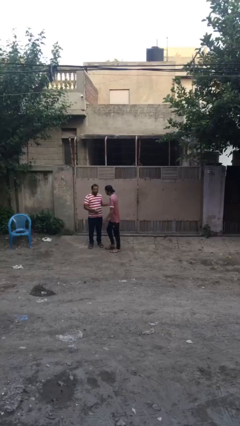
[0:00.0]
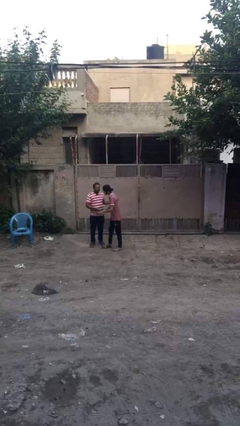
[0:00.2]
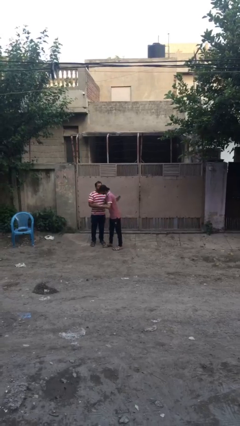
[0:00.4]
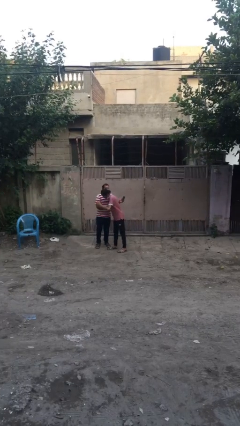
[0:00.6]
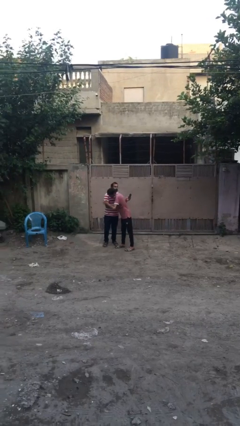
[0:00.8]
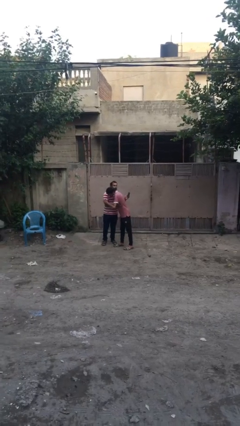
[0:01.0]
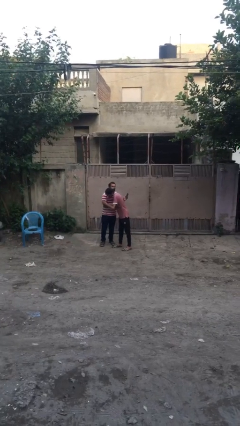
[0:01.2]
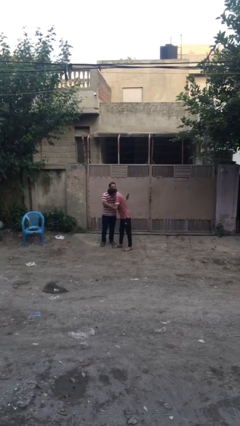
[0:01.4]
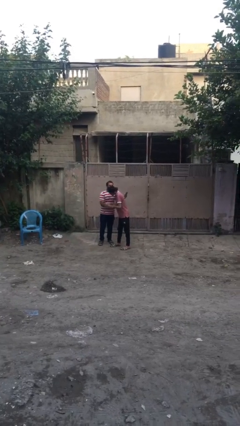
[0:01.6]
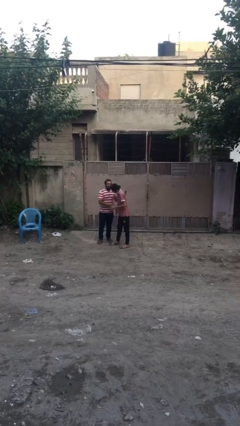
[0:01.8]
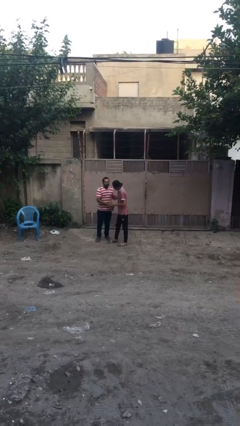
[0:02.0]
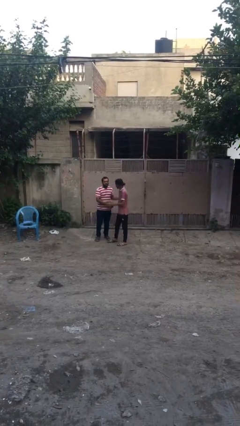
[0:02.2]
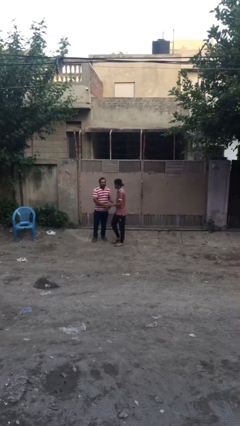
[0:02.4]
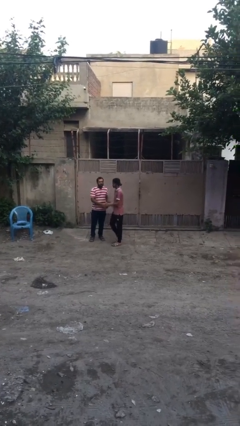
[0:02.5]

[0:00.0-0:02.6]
person embraces person

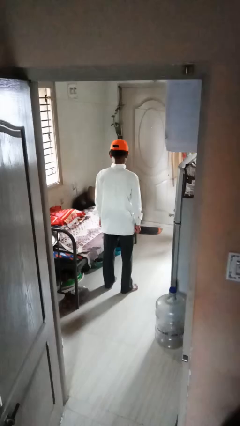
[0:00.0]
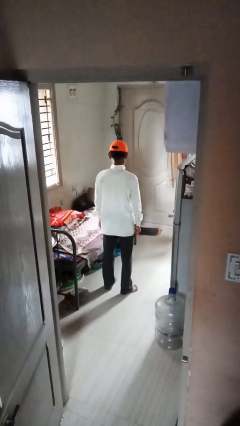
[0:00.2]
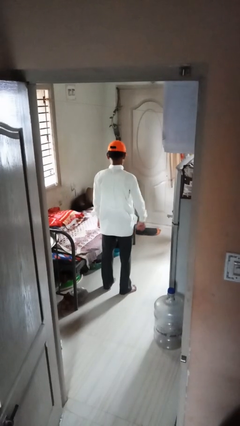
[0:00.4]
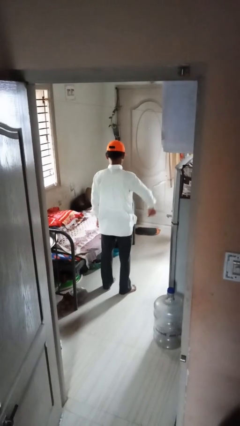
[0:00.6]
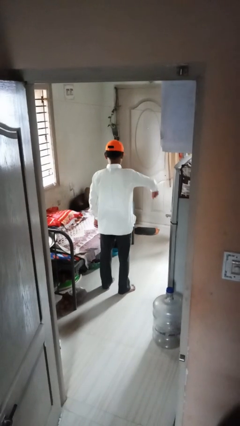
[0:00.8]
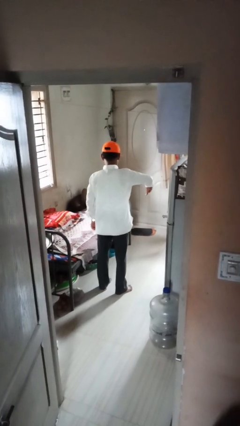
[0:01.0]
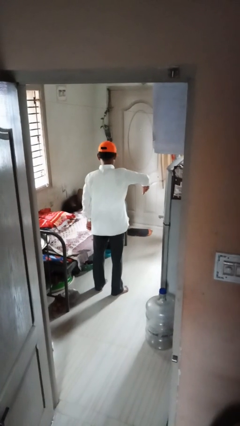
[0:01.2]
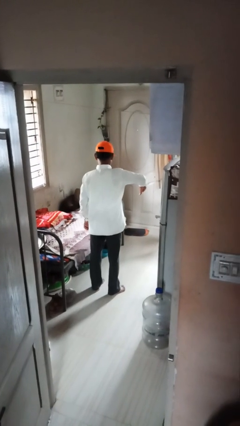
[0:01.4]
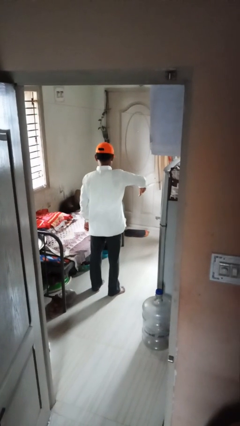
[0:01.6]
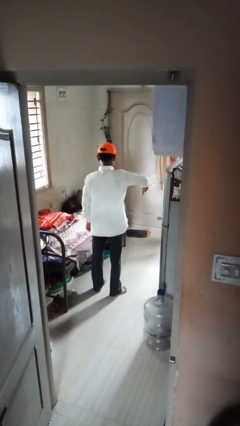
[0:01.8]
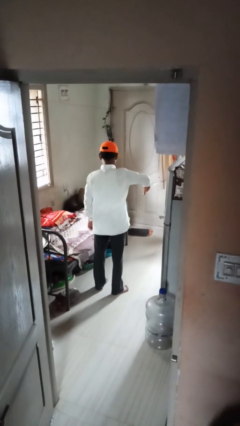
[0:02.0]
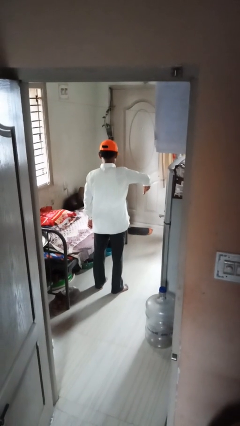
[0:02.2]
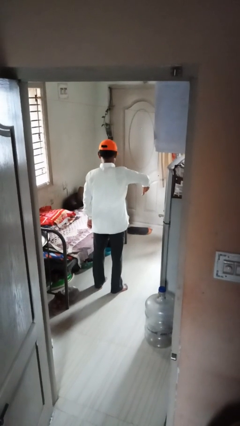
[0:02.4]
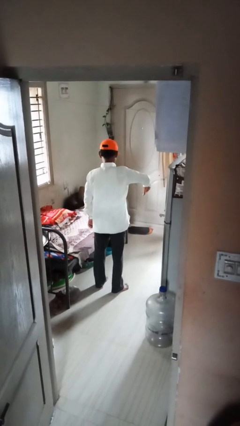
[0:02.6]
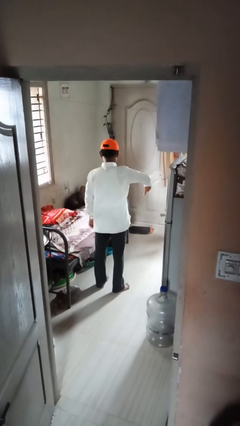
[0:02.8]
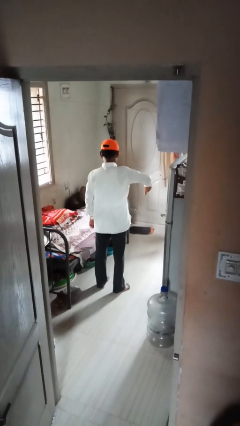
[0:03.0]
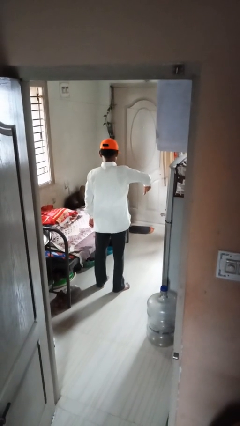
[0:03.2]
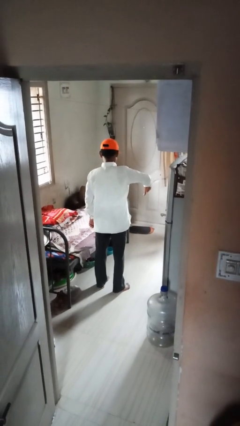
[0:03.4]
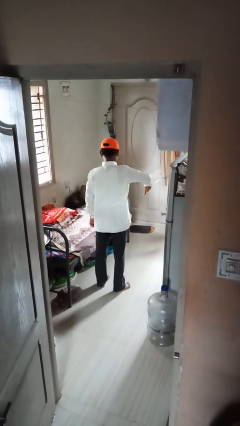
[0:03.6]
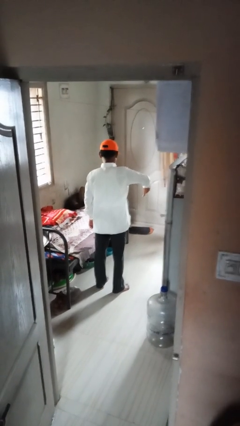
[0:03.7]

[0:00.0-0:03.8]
person gestures thumbs down

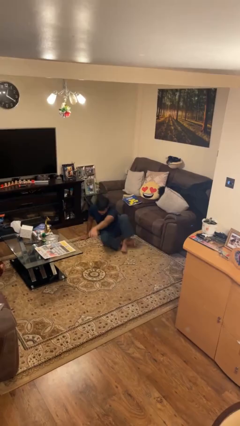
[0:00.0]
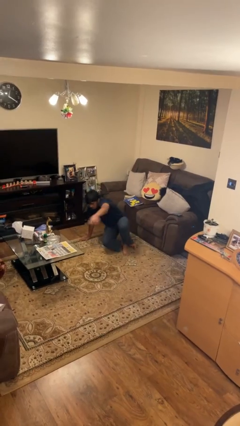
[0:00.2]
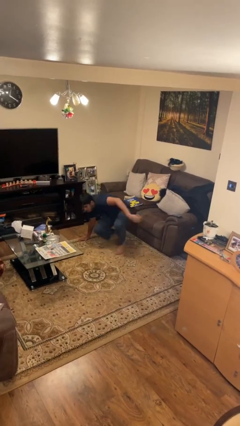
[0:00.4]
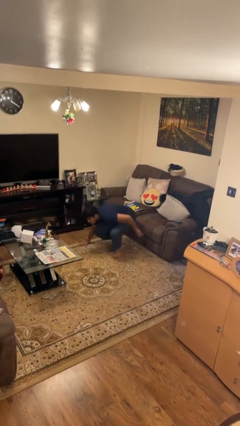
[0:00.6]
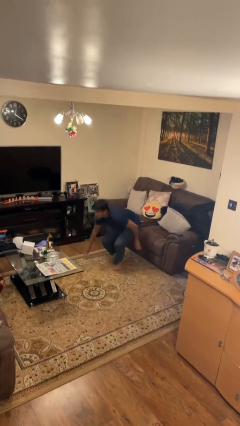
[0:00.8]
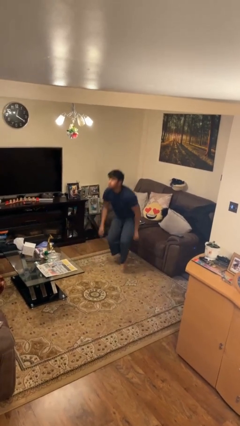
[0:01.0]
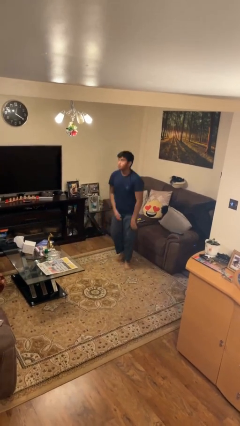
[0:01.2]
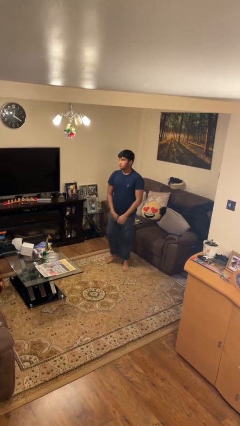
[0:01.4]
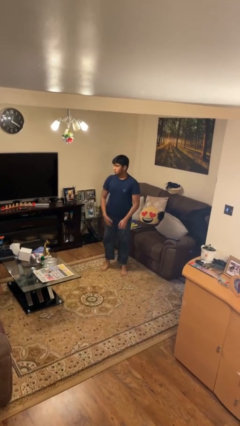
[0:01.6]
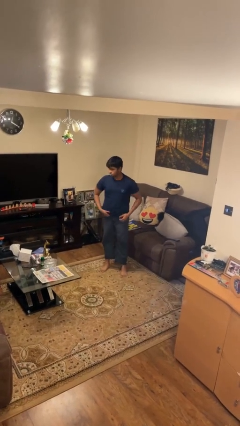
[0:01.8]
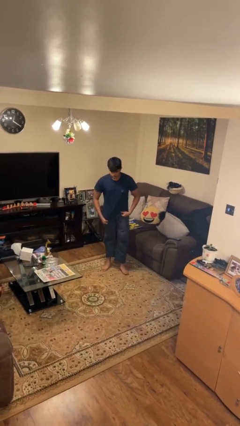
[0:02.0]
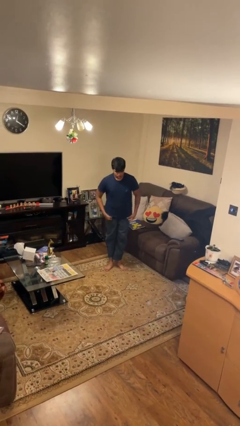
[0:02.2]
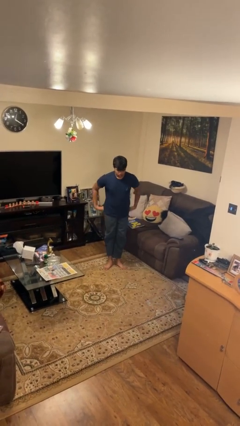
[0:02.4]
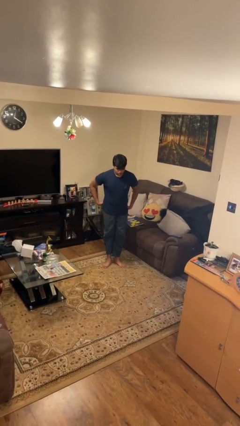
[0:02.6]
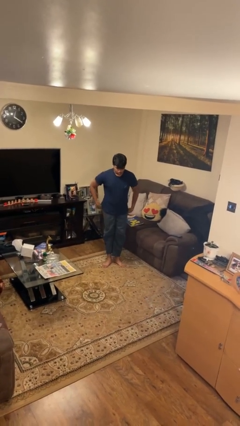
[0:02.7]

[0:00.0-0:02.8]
person stands up from floor

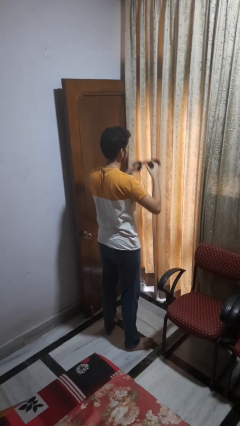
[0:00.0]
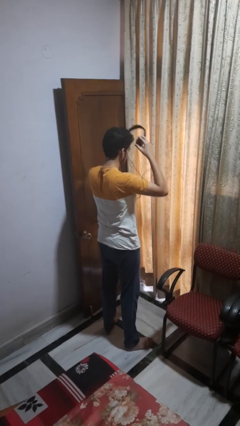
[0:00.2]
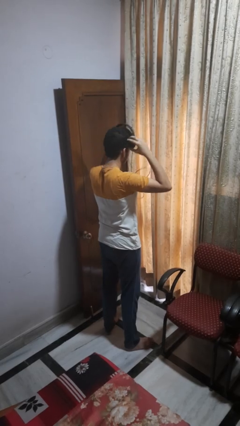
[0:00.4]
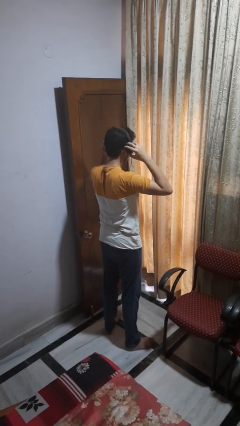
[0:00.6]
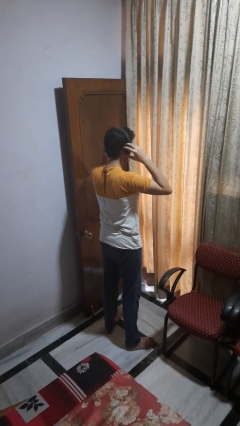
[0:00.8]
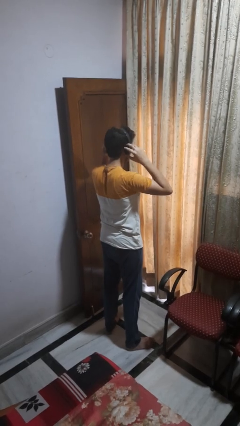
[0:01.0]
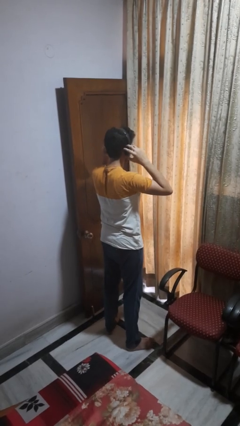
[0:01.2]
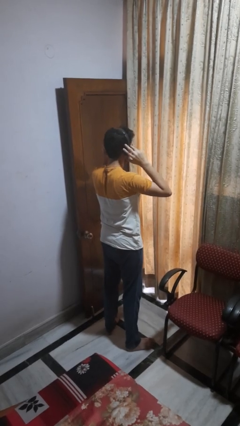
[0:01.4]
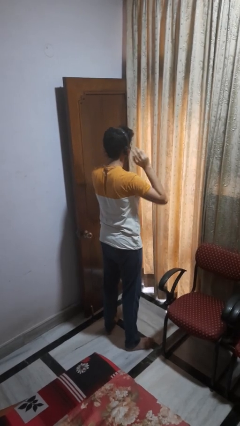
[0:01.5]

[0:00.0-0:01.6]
person puts on headphones

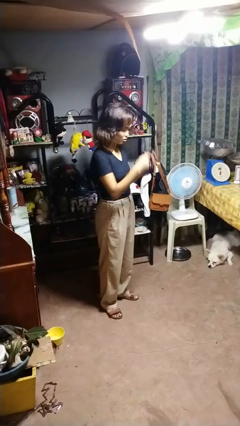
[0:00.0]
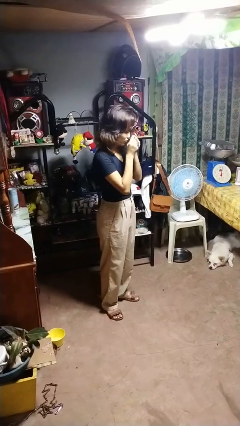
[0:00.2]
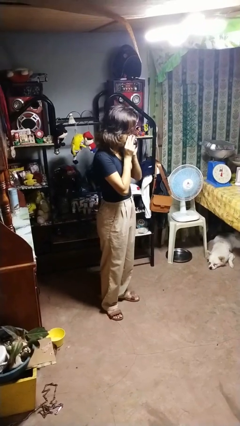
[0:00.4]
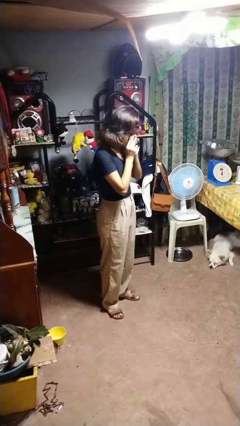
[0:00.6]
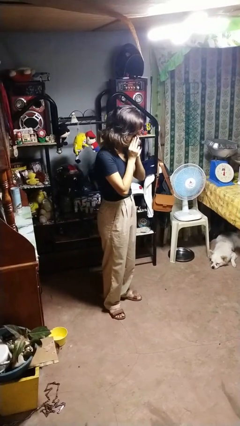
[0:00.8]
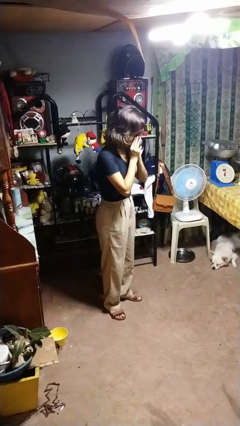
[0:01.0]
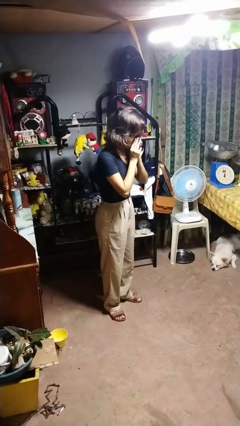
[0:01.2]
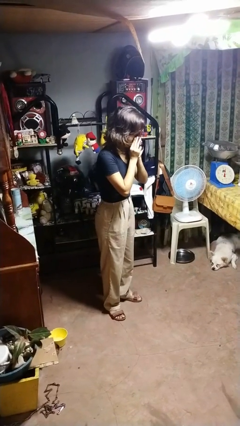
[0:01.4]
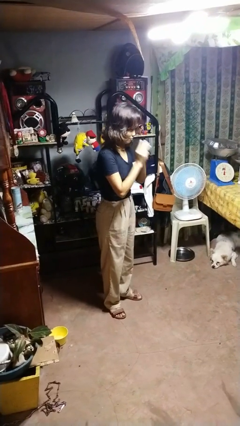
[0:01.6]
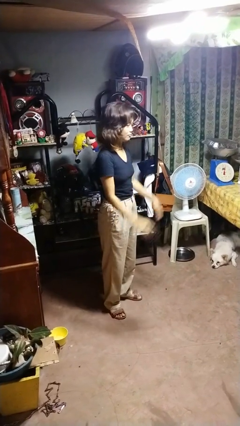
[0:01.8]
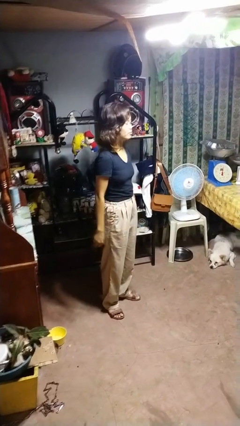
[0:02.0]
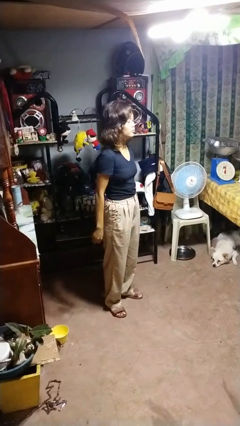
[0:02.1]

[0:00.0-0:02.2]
person blows nose

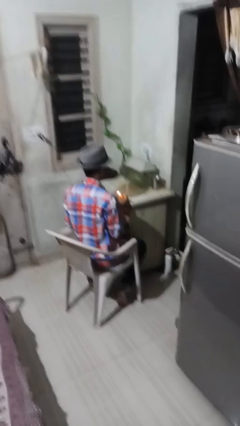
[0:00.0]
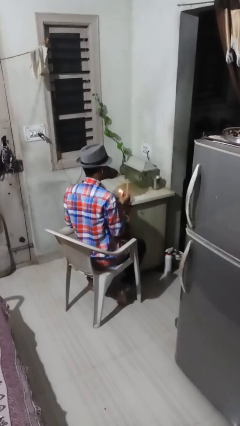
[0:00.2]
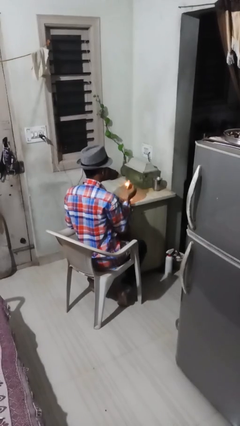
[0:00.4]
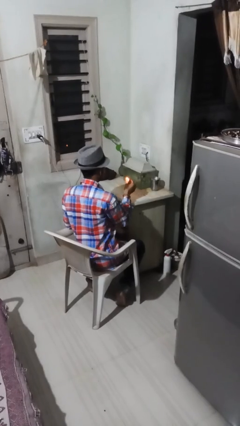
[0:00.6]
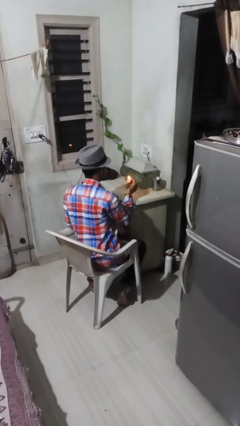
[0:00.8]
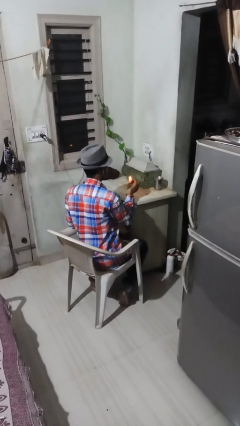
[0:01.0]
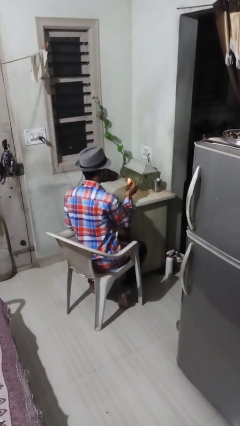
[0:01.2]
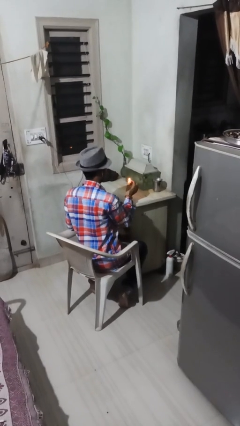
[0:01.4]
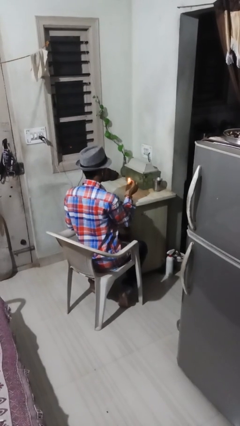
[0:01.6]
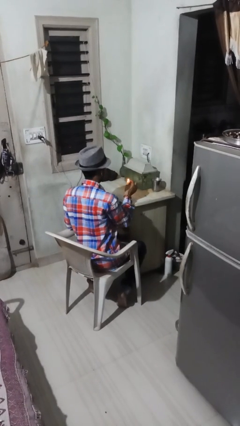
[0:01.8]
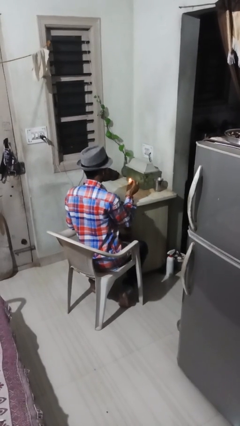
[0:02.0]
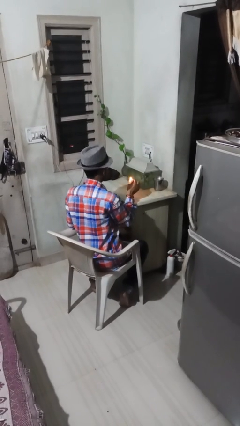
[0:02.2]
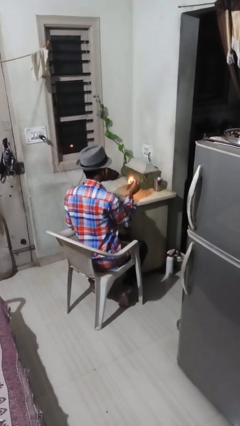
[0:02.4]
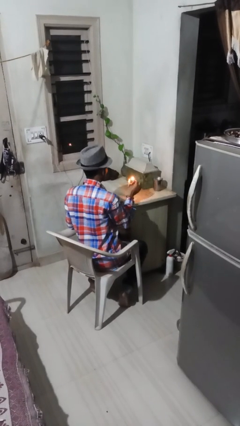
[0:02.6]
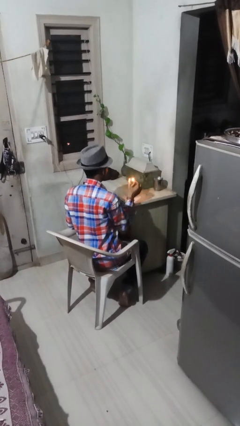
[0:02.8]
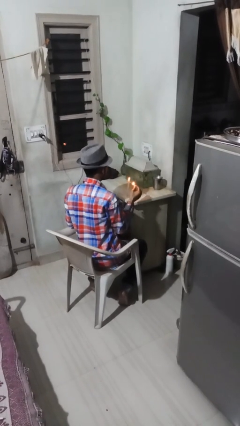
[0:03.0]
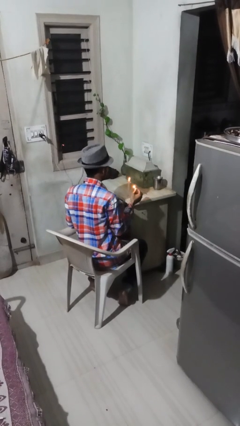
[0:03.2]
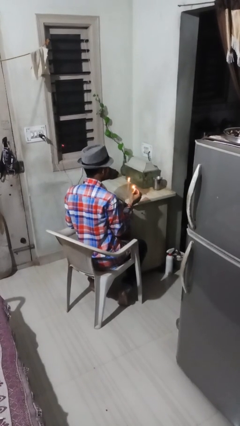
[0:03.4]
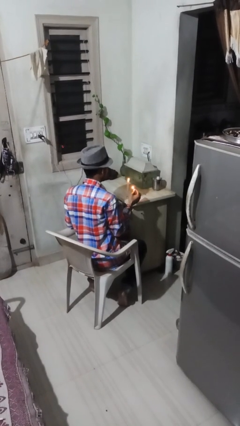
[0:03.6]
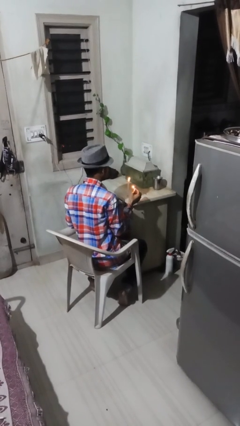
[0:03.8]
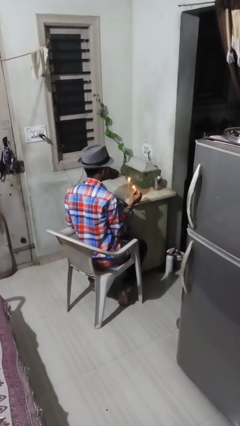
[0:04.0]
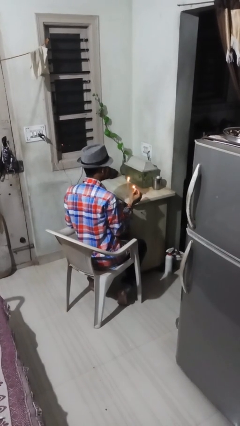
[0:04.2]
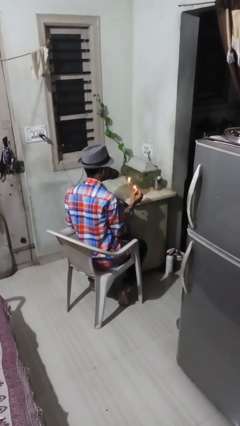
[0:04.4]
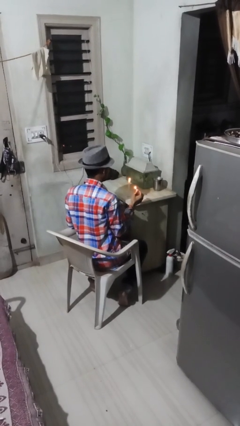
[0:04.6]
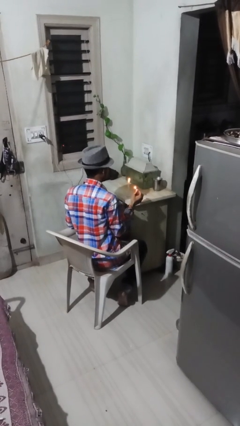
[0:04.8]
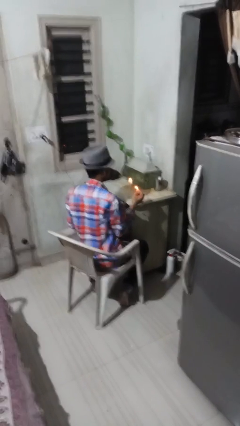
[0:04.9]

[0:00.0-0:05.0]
person lights candle
